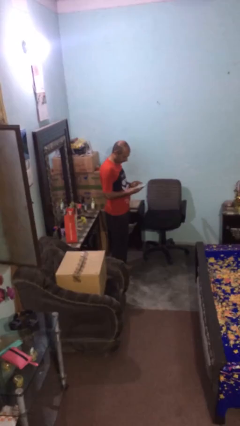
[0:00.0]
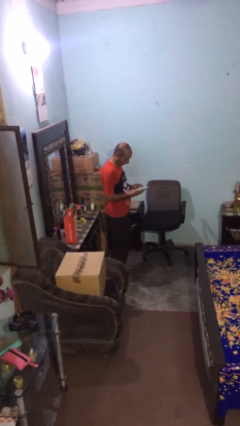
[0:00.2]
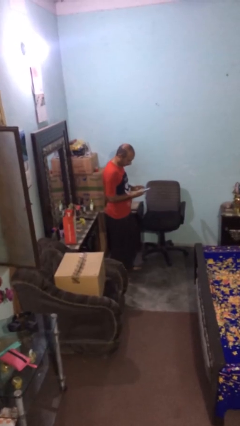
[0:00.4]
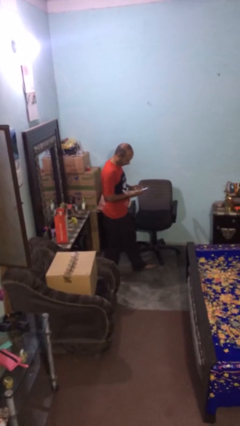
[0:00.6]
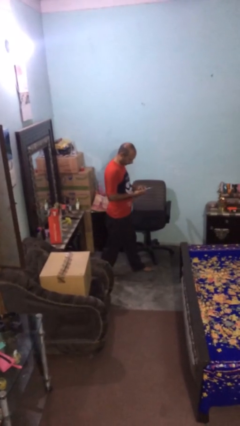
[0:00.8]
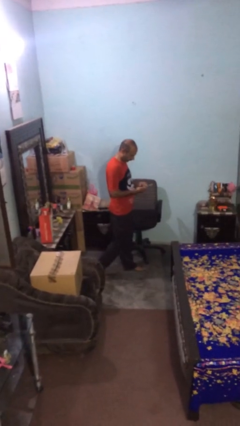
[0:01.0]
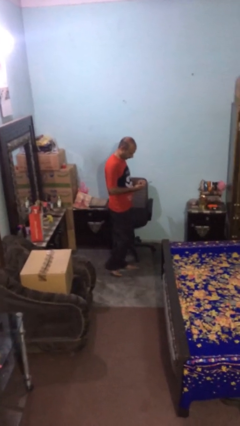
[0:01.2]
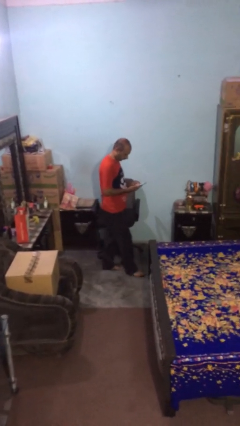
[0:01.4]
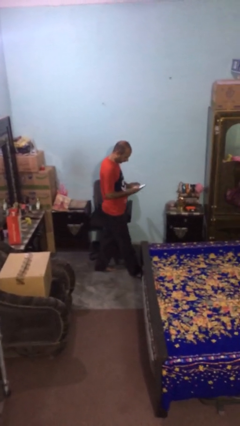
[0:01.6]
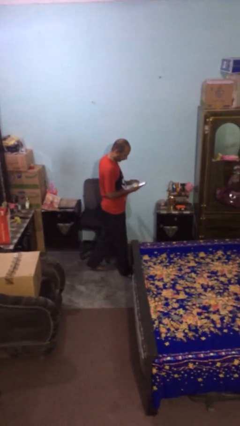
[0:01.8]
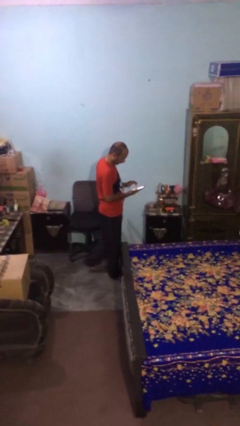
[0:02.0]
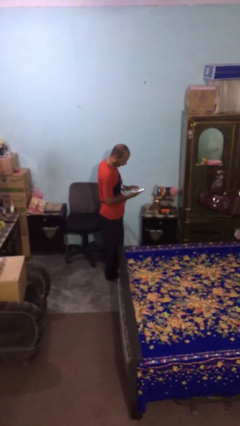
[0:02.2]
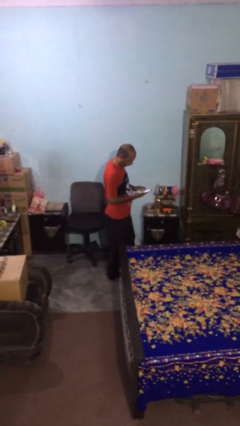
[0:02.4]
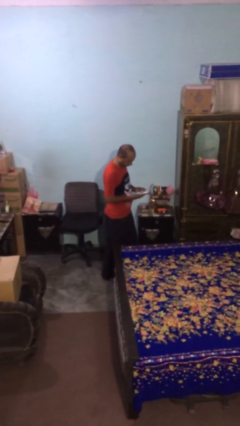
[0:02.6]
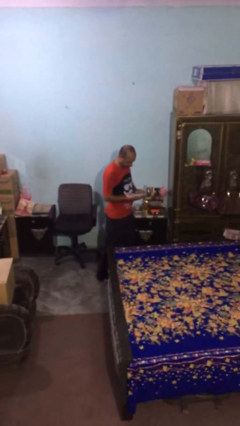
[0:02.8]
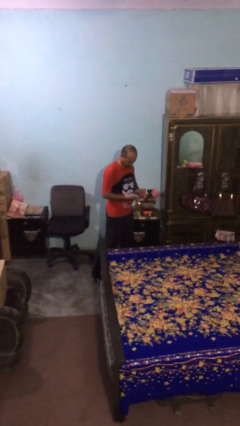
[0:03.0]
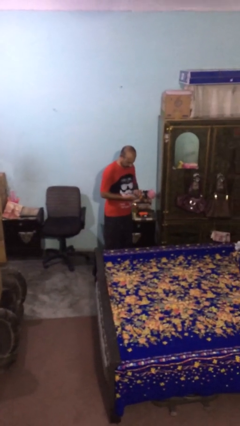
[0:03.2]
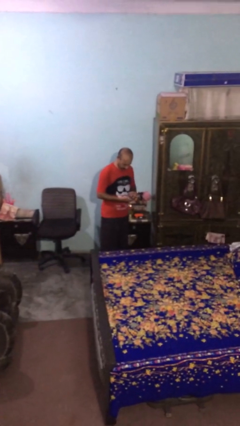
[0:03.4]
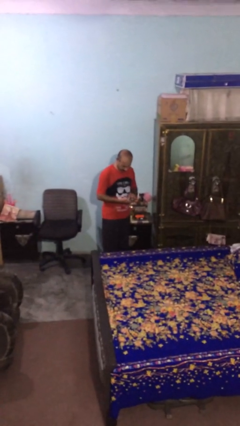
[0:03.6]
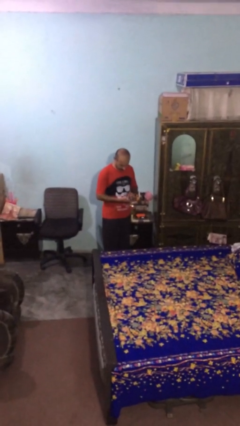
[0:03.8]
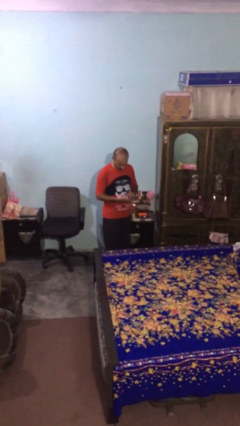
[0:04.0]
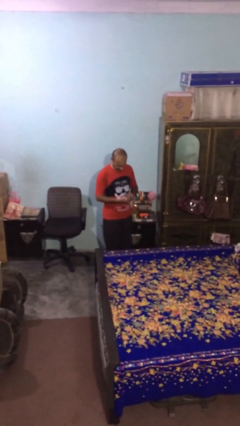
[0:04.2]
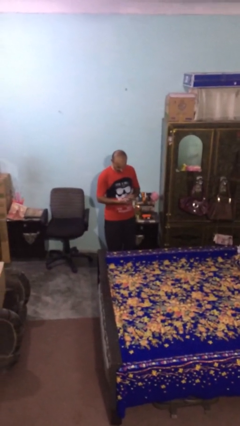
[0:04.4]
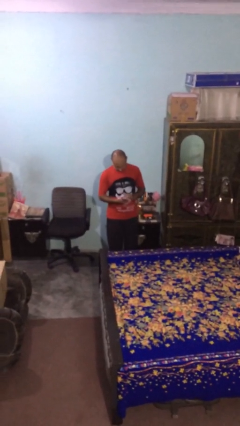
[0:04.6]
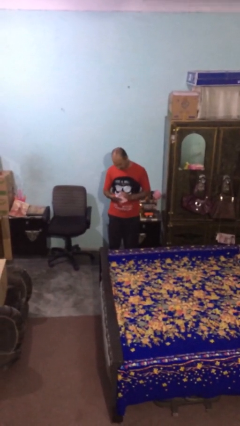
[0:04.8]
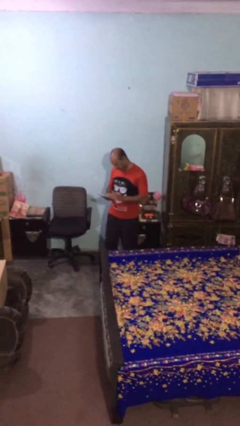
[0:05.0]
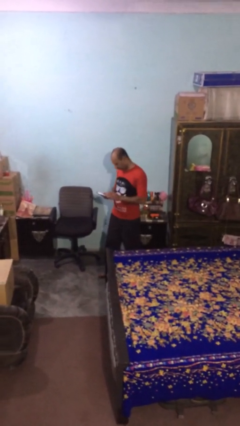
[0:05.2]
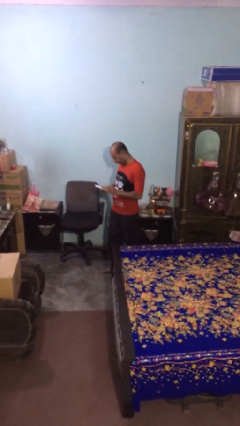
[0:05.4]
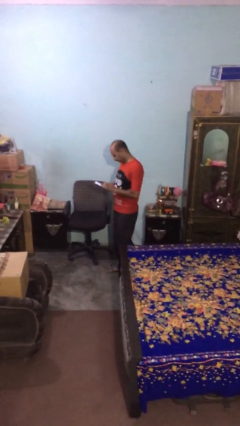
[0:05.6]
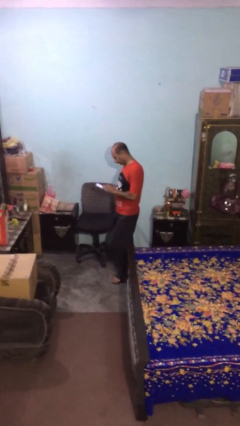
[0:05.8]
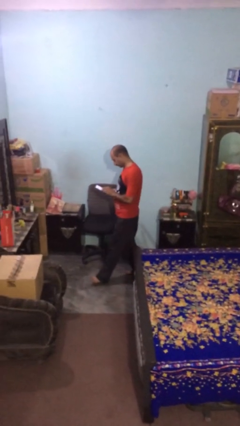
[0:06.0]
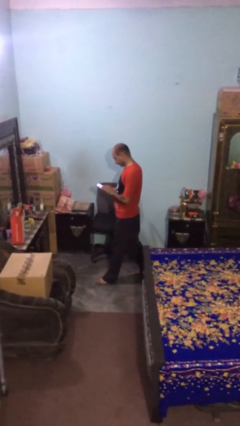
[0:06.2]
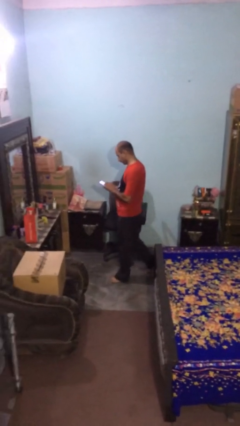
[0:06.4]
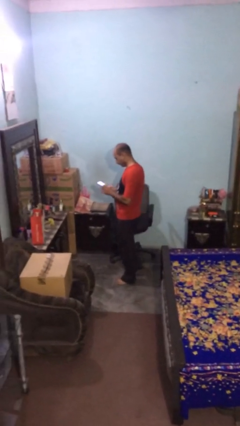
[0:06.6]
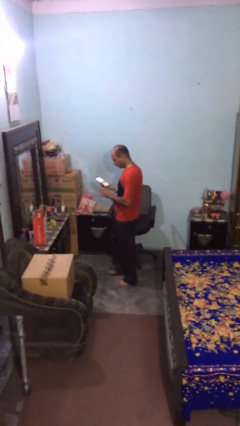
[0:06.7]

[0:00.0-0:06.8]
person texts on phone

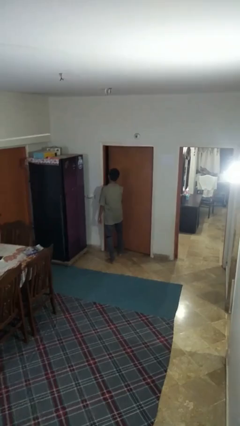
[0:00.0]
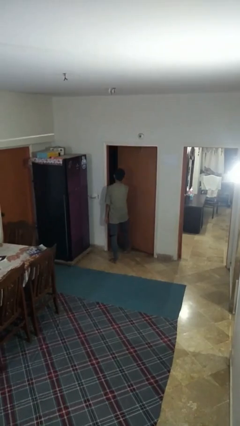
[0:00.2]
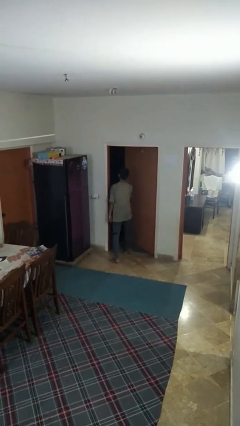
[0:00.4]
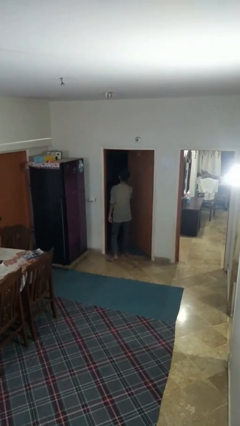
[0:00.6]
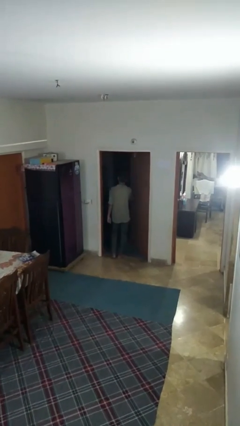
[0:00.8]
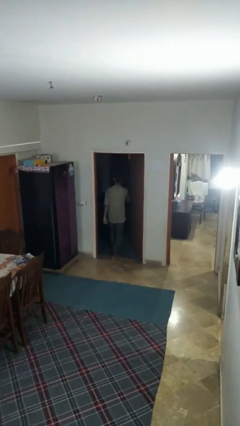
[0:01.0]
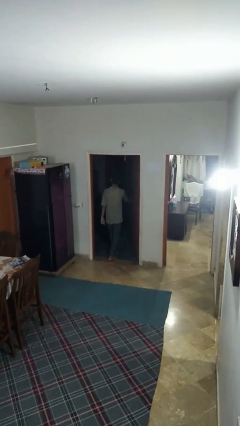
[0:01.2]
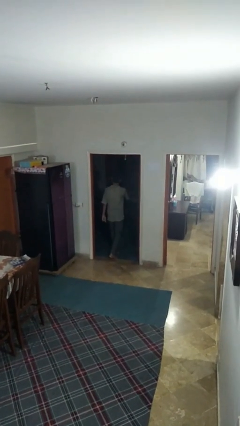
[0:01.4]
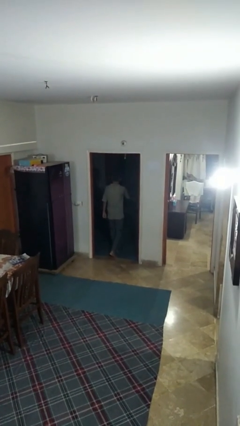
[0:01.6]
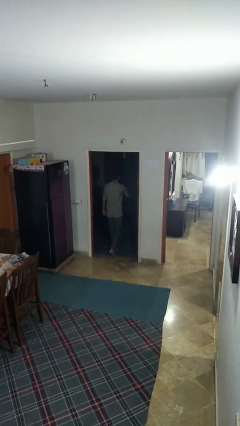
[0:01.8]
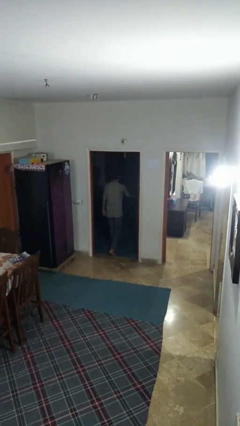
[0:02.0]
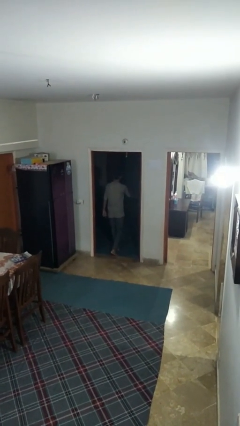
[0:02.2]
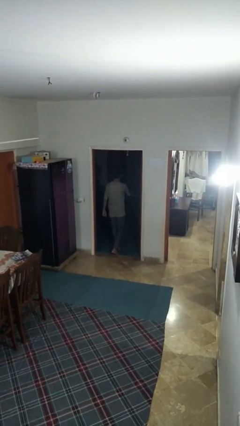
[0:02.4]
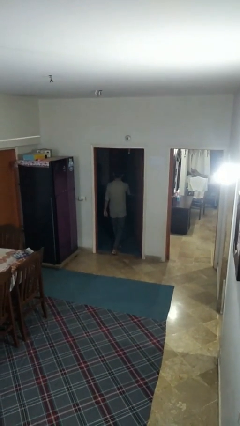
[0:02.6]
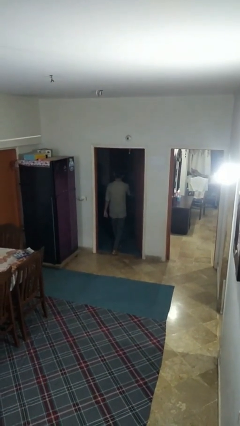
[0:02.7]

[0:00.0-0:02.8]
person opens facility door

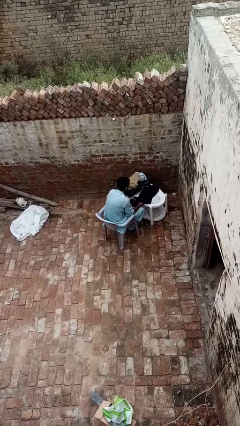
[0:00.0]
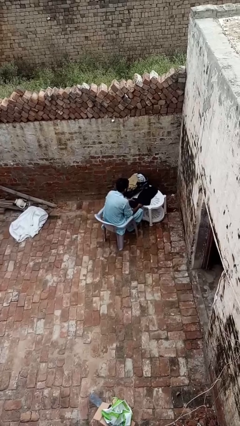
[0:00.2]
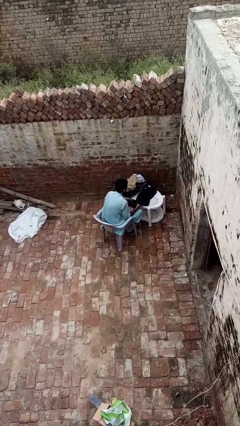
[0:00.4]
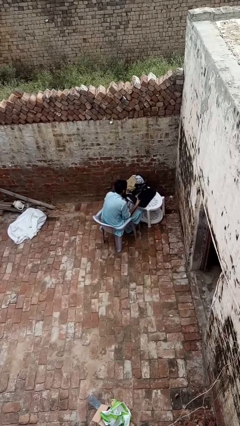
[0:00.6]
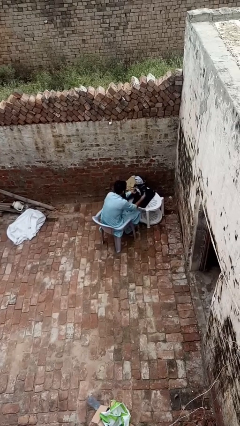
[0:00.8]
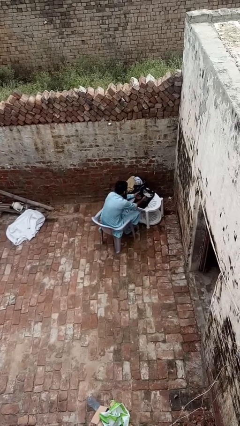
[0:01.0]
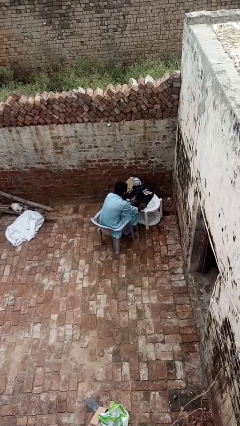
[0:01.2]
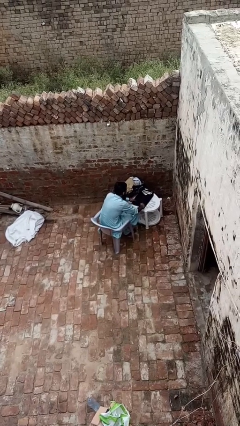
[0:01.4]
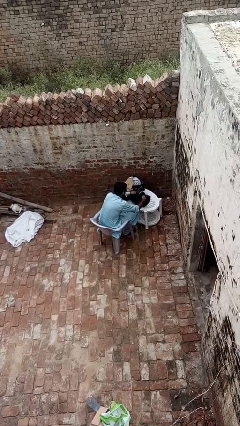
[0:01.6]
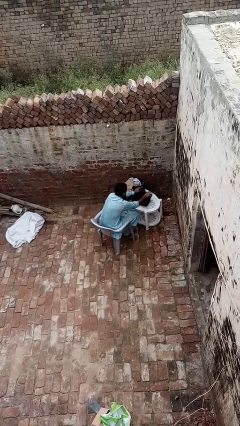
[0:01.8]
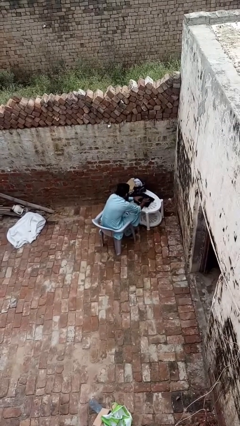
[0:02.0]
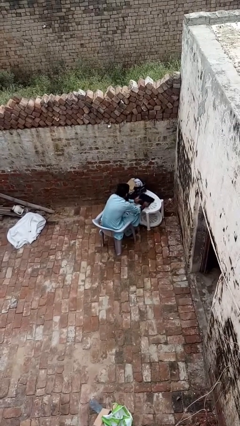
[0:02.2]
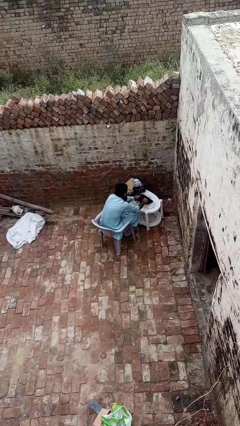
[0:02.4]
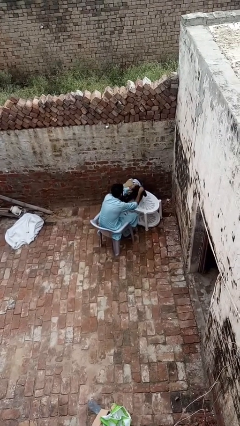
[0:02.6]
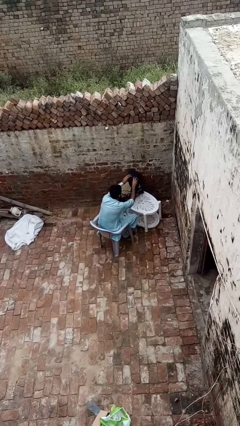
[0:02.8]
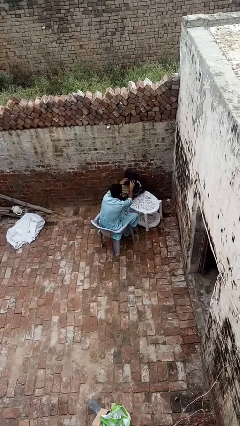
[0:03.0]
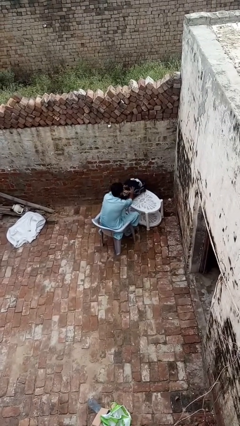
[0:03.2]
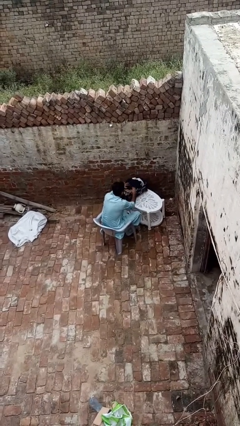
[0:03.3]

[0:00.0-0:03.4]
person folds pants

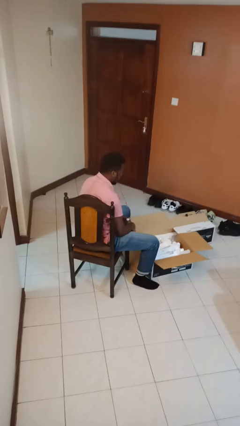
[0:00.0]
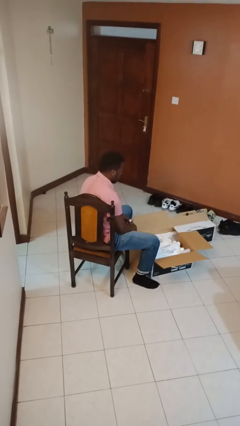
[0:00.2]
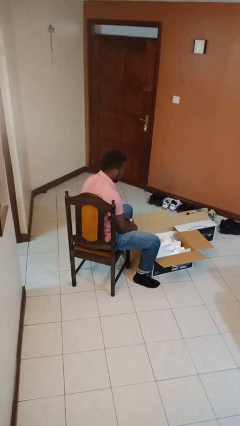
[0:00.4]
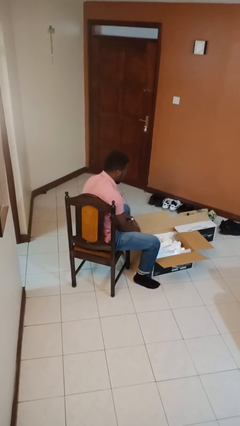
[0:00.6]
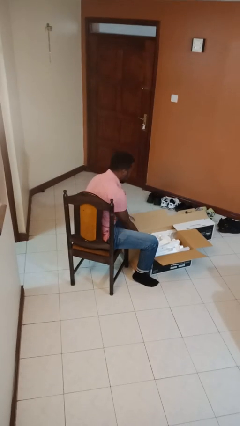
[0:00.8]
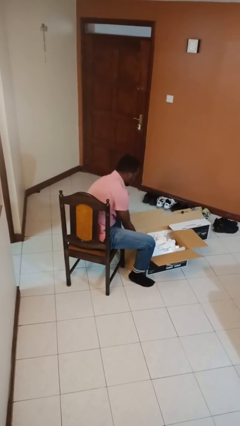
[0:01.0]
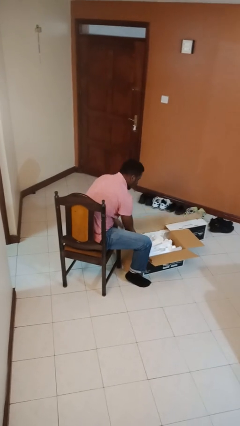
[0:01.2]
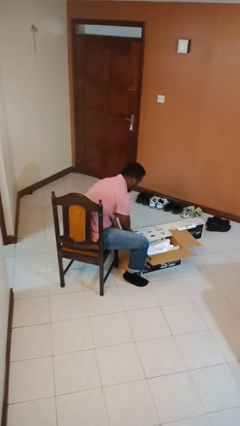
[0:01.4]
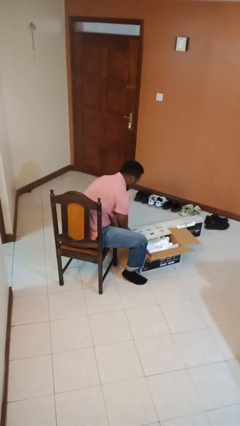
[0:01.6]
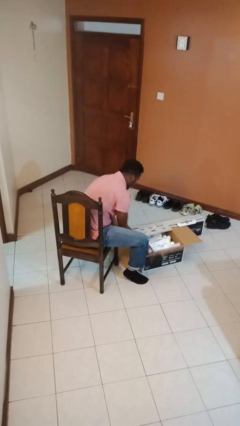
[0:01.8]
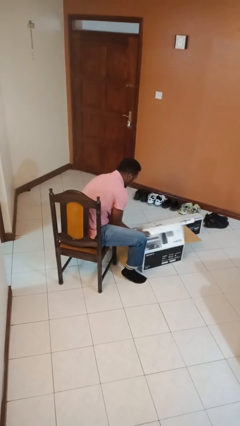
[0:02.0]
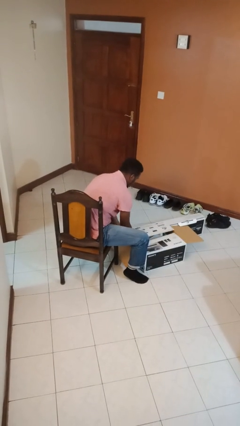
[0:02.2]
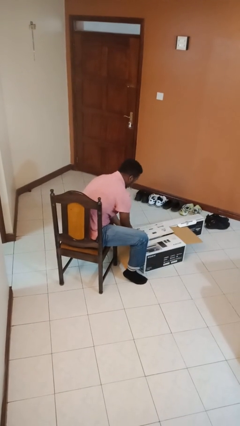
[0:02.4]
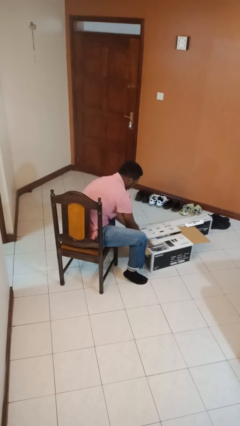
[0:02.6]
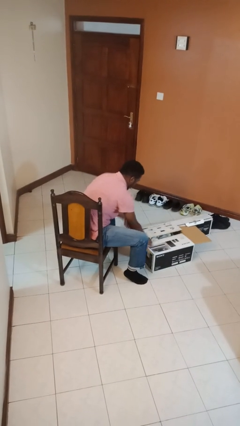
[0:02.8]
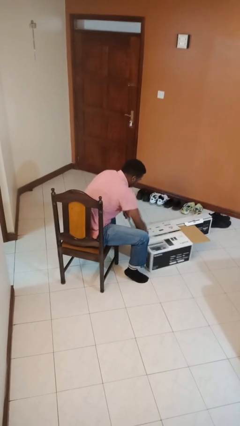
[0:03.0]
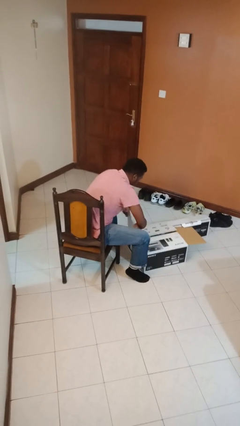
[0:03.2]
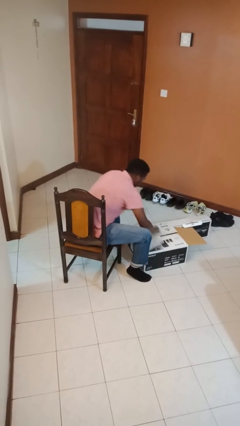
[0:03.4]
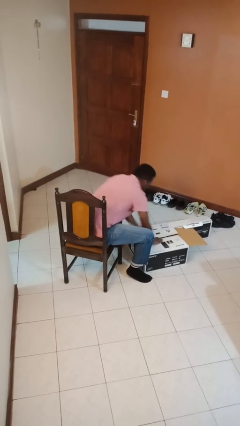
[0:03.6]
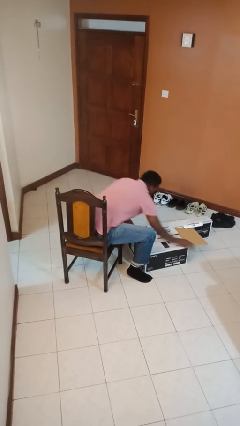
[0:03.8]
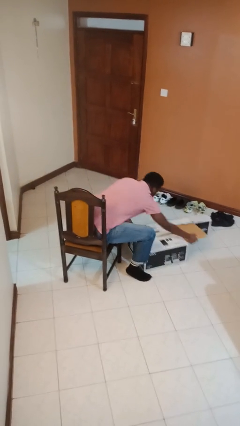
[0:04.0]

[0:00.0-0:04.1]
person closes box

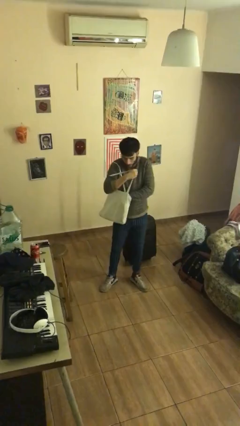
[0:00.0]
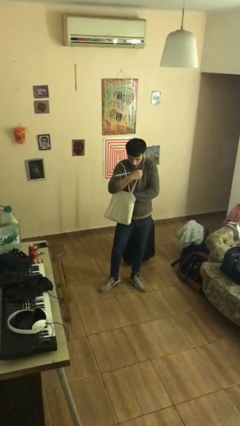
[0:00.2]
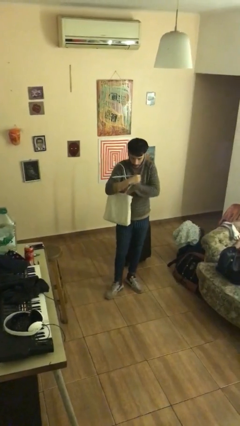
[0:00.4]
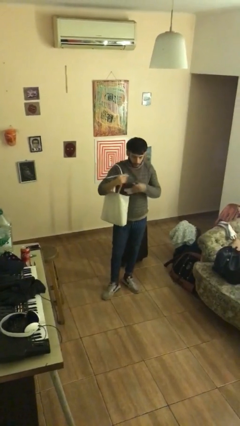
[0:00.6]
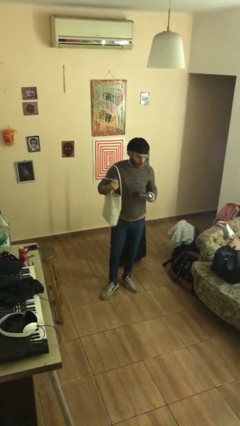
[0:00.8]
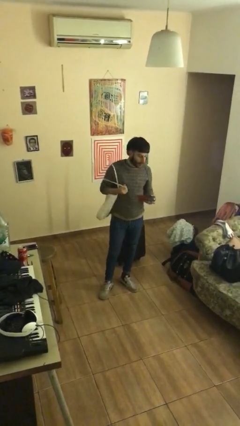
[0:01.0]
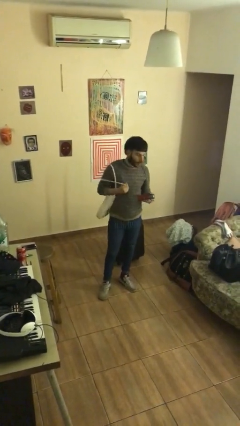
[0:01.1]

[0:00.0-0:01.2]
person takes object from purse
